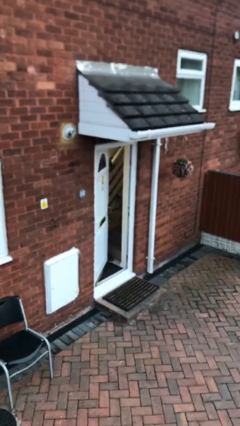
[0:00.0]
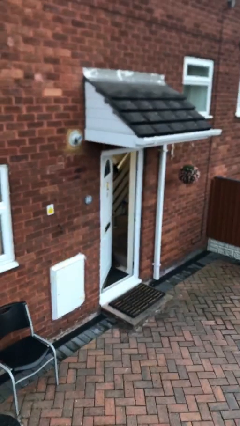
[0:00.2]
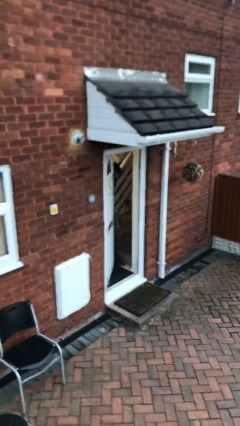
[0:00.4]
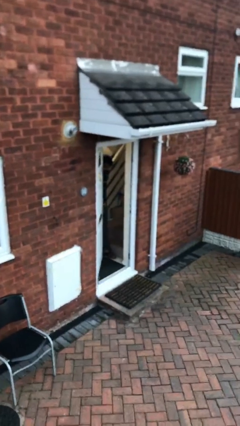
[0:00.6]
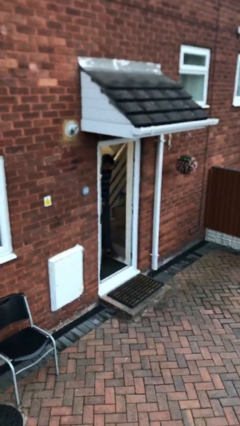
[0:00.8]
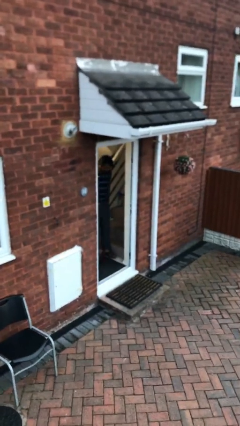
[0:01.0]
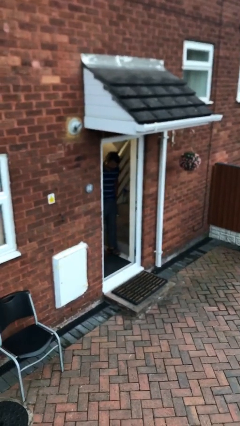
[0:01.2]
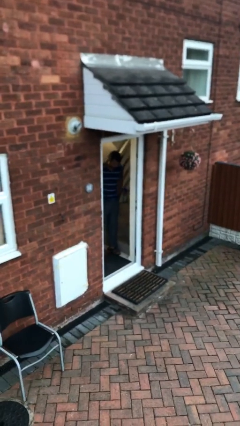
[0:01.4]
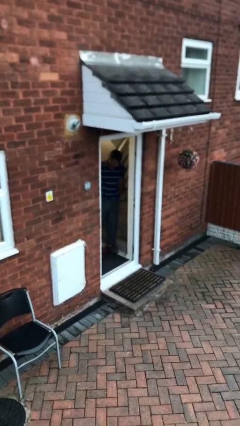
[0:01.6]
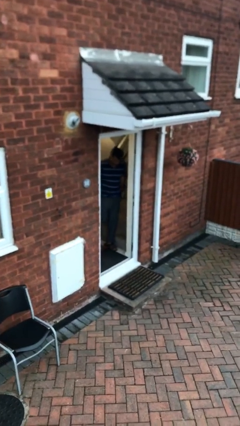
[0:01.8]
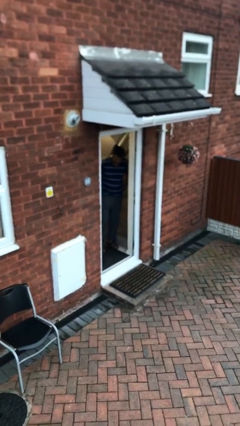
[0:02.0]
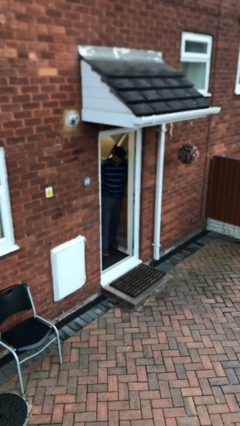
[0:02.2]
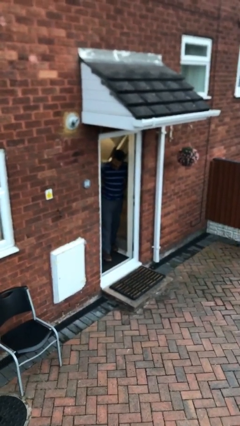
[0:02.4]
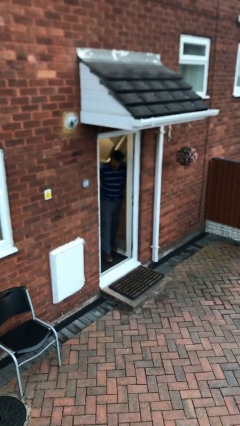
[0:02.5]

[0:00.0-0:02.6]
person opens facility door

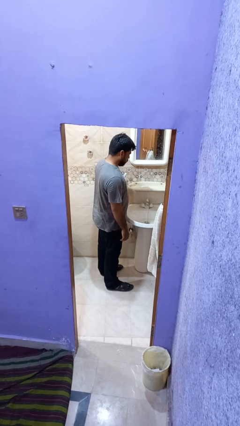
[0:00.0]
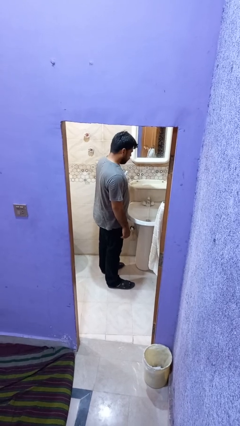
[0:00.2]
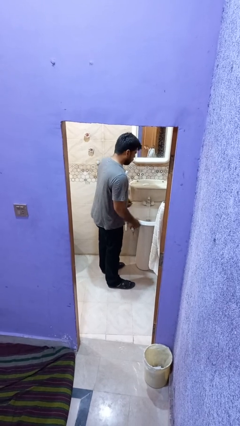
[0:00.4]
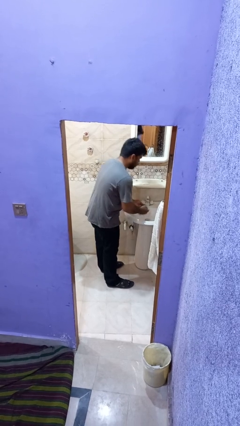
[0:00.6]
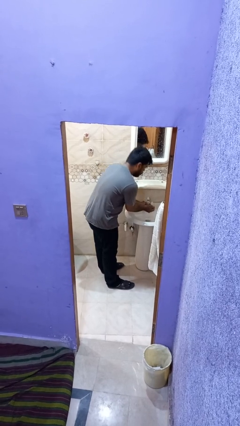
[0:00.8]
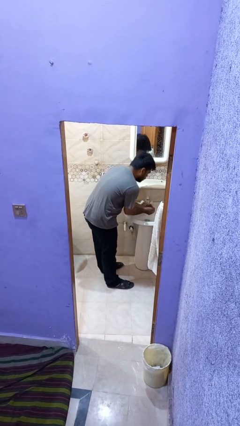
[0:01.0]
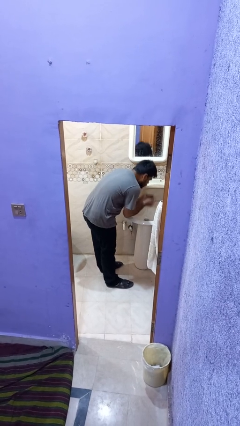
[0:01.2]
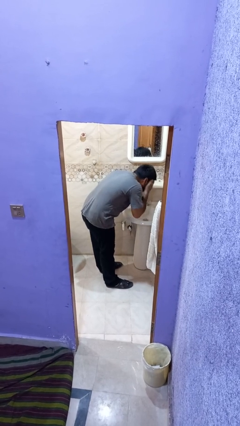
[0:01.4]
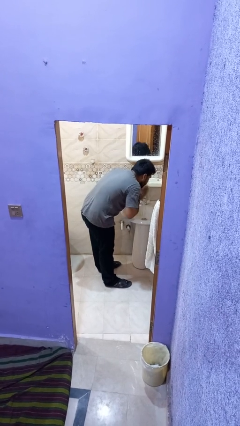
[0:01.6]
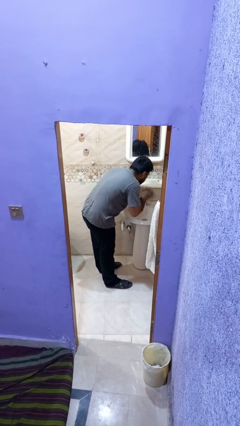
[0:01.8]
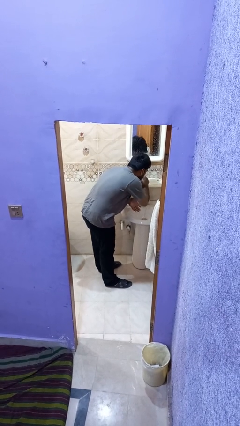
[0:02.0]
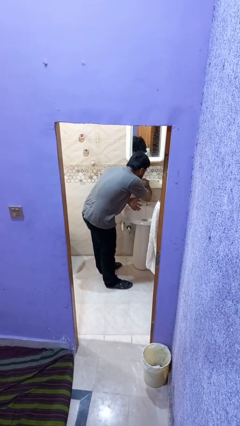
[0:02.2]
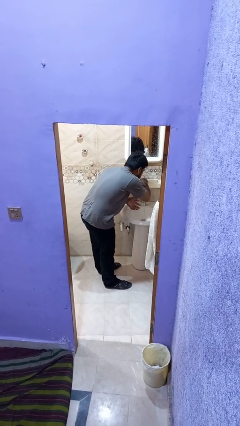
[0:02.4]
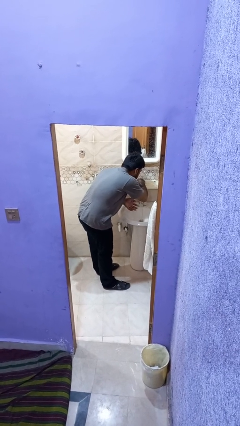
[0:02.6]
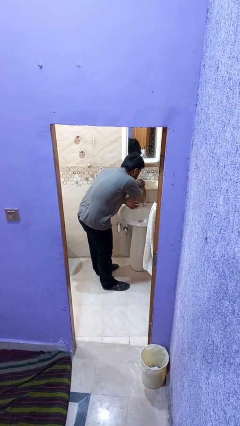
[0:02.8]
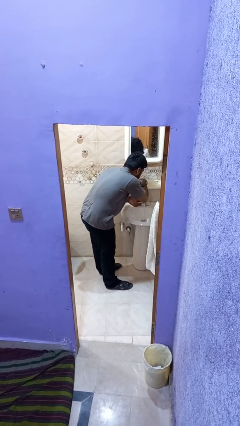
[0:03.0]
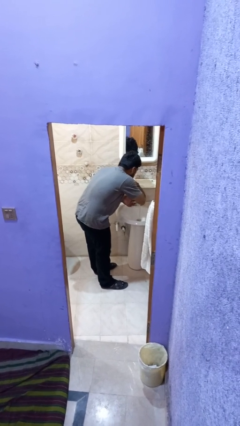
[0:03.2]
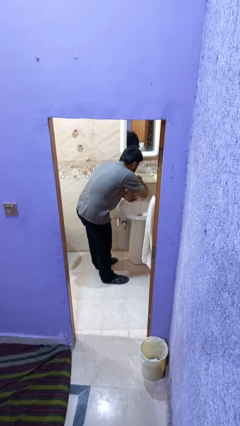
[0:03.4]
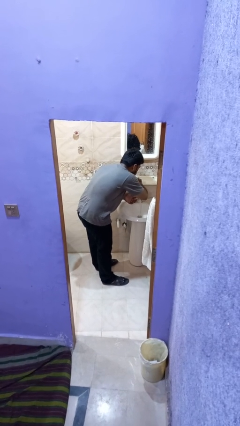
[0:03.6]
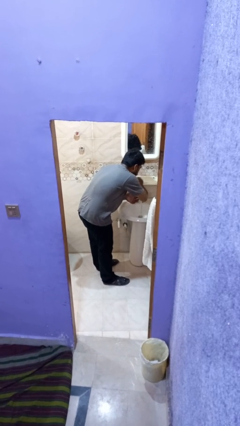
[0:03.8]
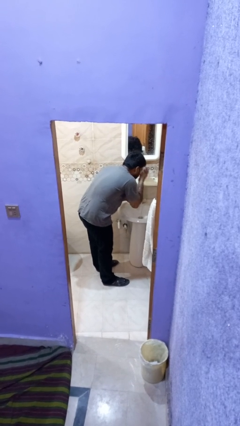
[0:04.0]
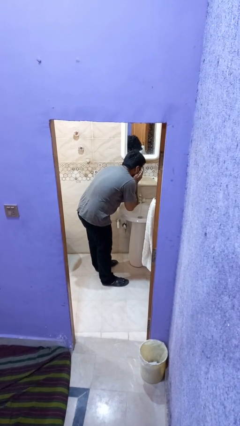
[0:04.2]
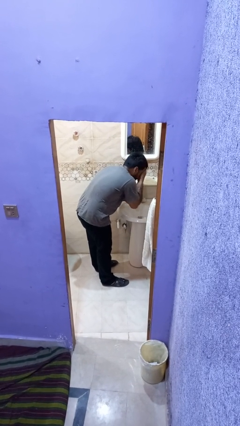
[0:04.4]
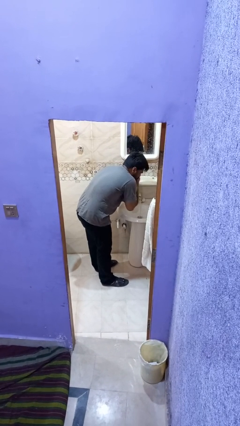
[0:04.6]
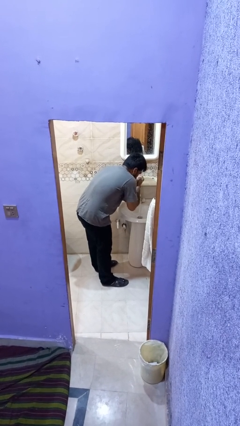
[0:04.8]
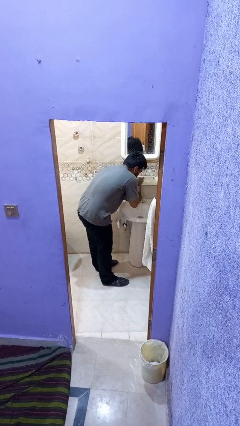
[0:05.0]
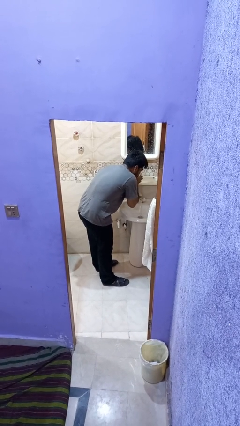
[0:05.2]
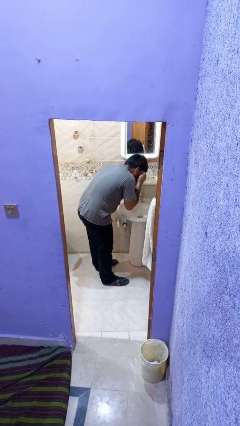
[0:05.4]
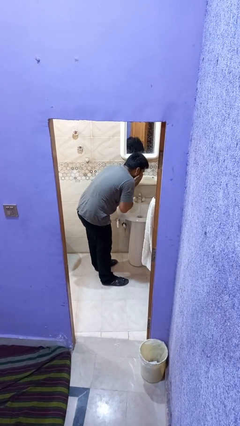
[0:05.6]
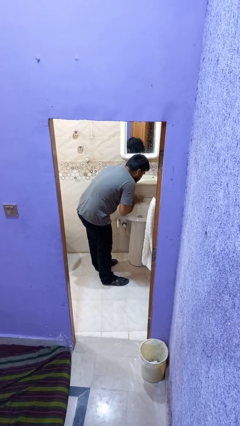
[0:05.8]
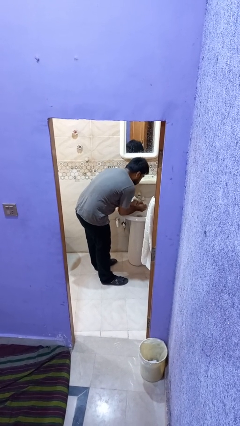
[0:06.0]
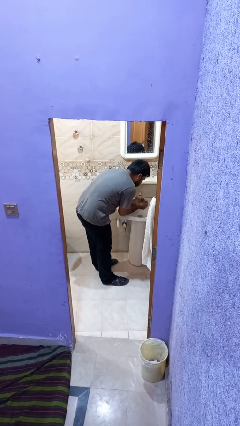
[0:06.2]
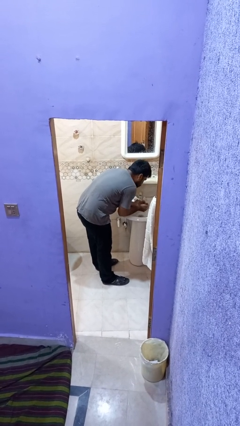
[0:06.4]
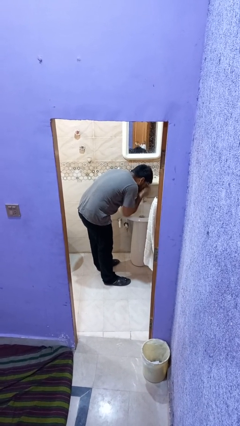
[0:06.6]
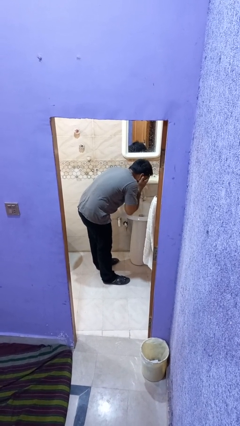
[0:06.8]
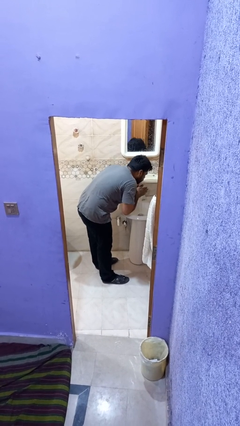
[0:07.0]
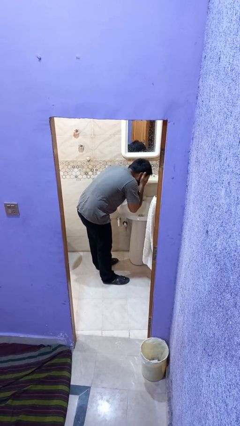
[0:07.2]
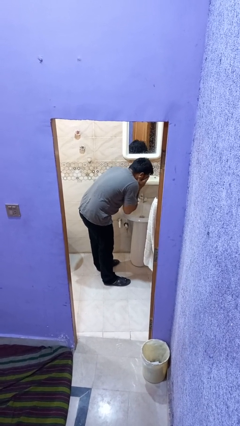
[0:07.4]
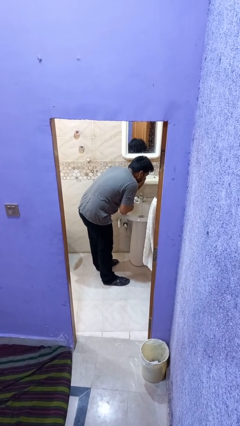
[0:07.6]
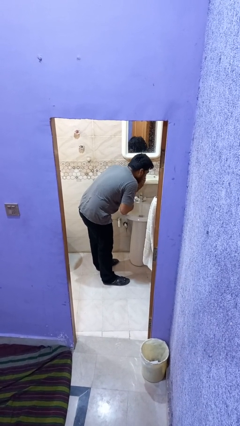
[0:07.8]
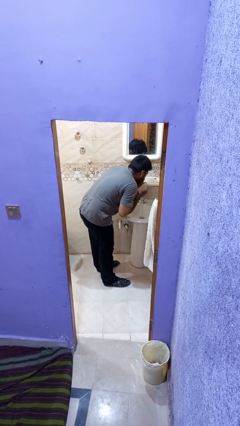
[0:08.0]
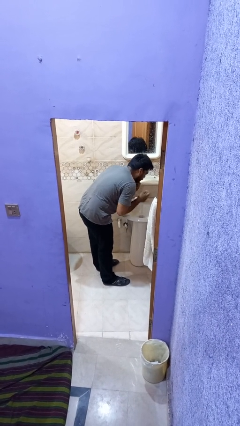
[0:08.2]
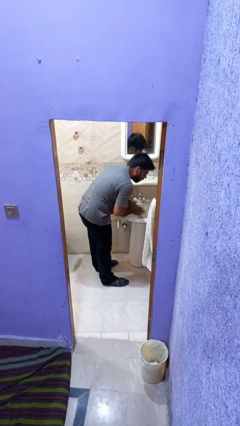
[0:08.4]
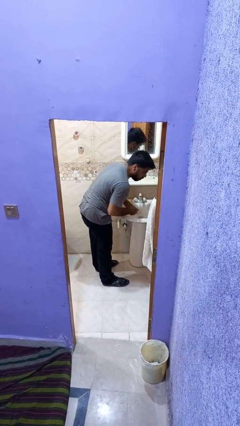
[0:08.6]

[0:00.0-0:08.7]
person washes face

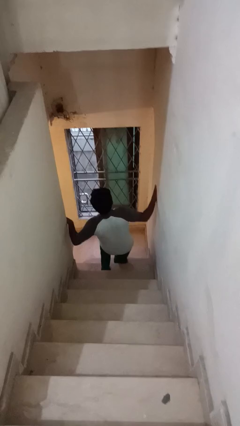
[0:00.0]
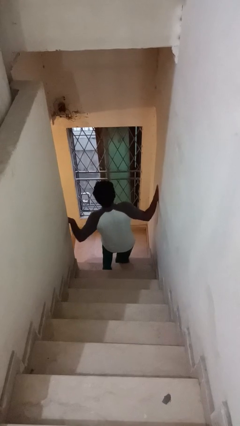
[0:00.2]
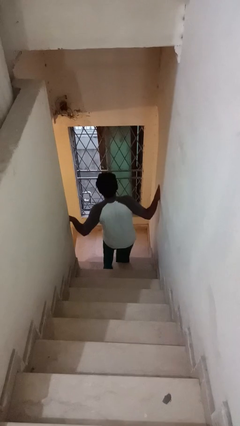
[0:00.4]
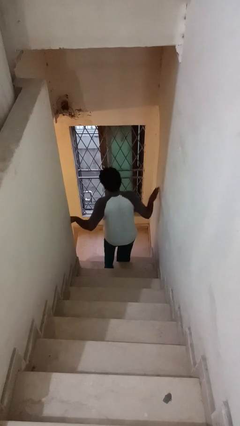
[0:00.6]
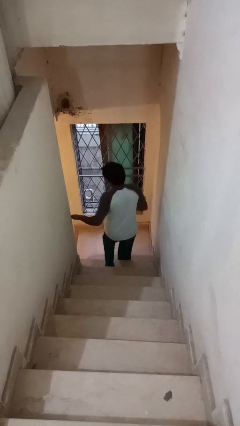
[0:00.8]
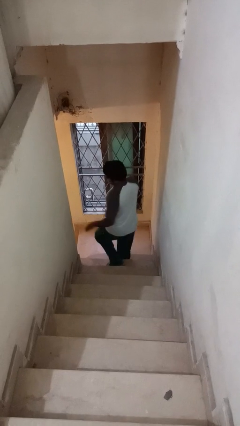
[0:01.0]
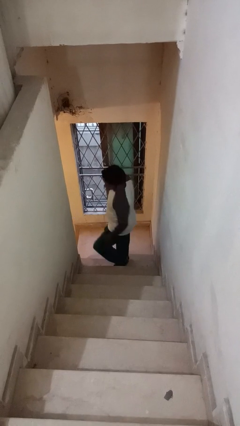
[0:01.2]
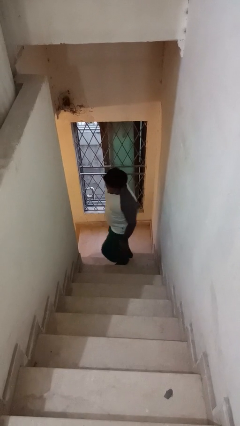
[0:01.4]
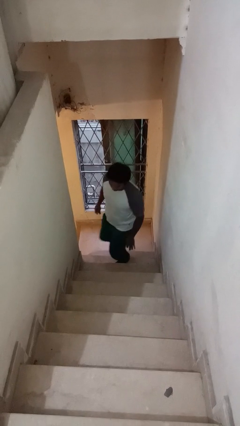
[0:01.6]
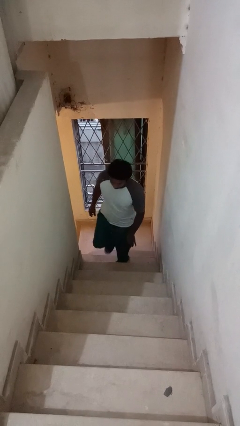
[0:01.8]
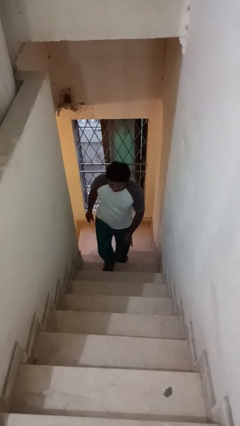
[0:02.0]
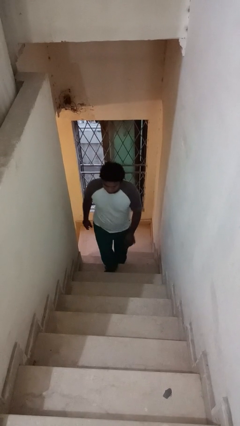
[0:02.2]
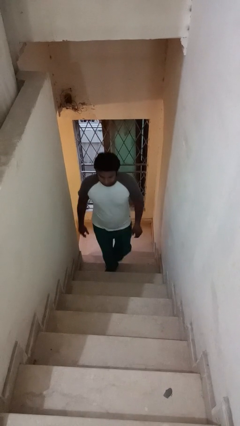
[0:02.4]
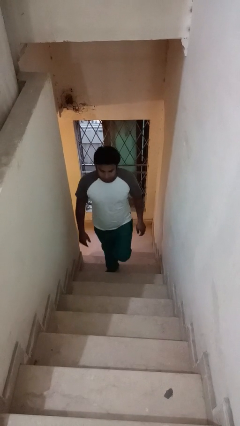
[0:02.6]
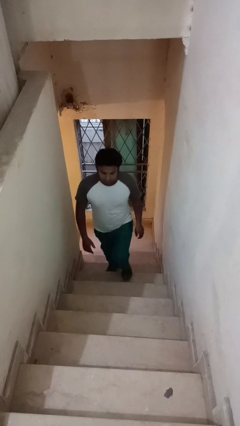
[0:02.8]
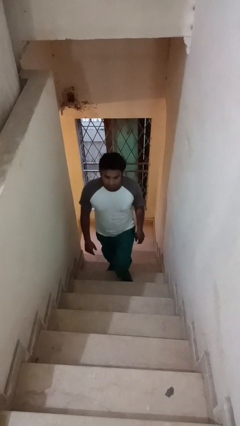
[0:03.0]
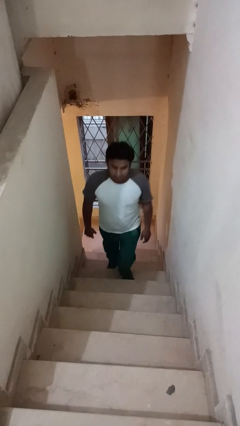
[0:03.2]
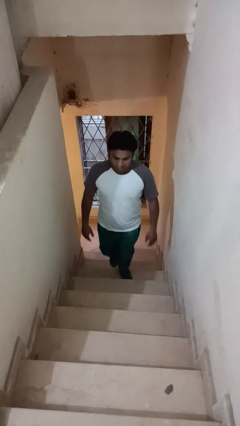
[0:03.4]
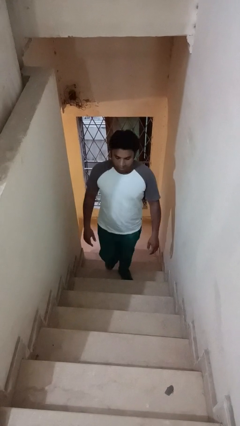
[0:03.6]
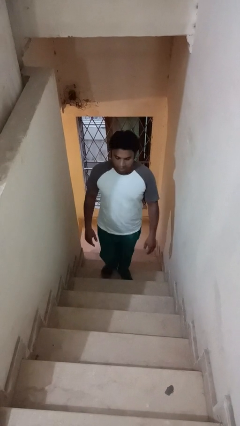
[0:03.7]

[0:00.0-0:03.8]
person climbs up stairs

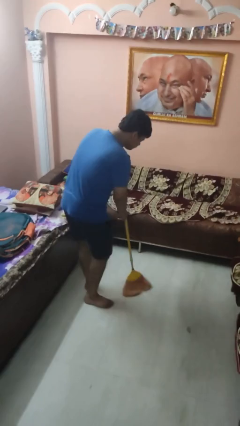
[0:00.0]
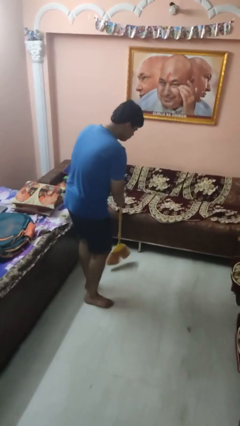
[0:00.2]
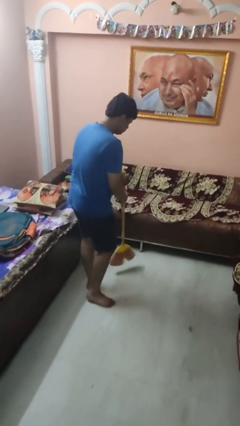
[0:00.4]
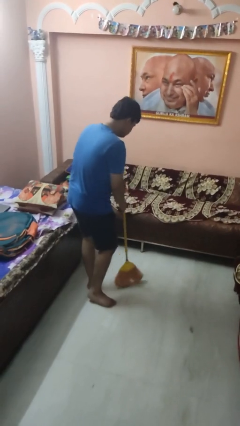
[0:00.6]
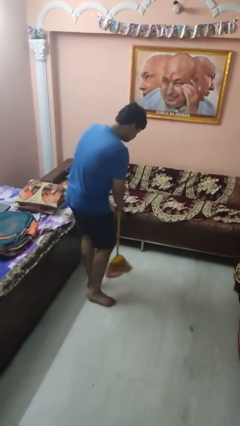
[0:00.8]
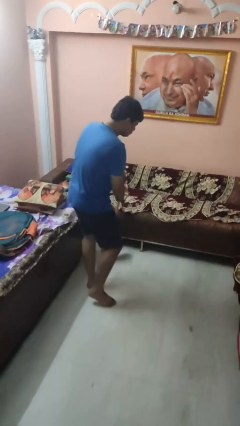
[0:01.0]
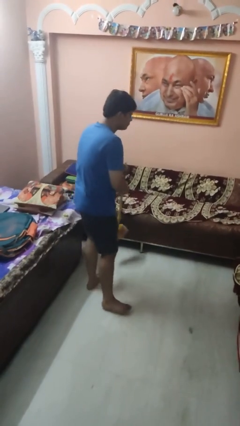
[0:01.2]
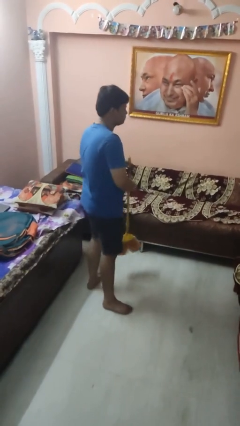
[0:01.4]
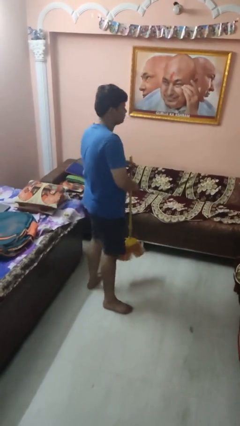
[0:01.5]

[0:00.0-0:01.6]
person sweeps floor

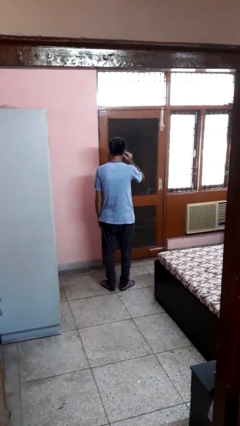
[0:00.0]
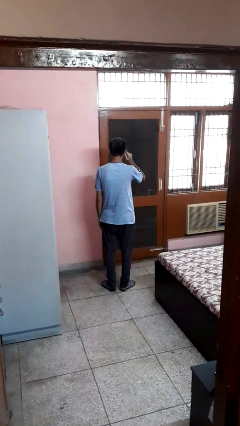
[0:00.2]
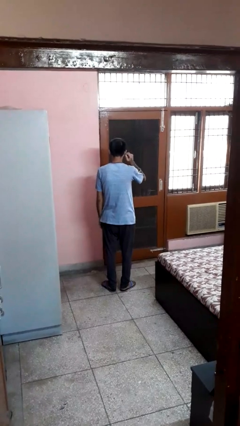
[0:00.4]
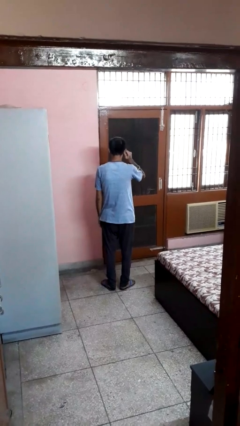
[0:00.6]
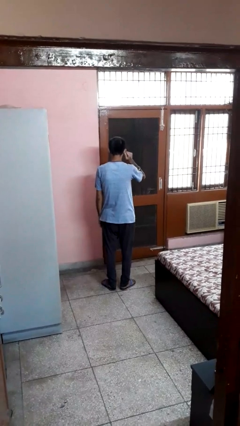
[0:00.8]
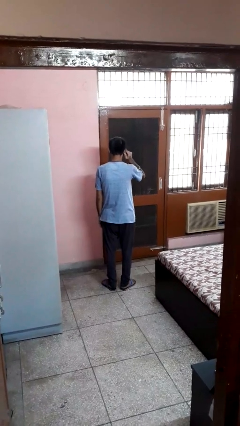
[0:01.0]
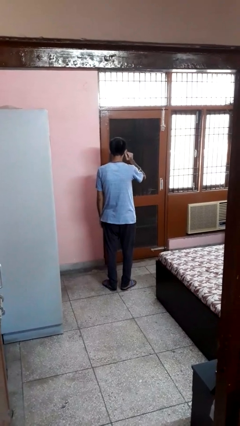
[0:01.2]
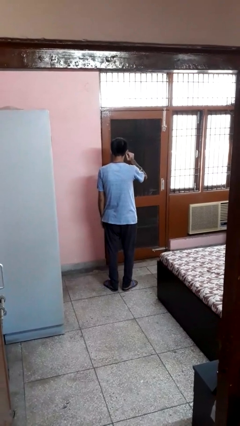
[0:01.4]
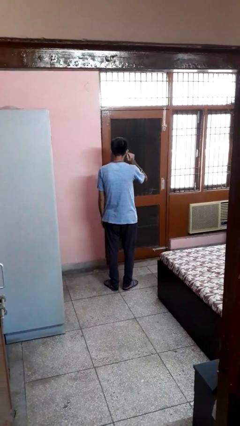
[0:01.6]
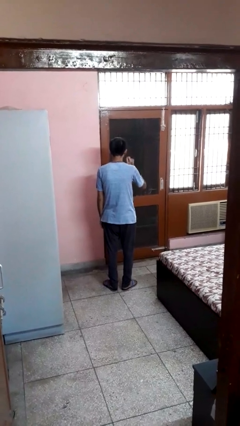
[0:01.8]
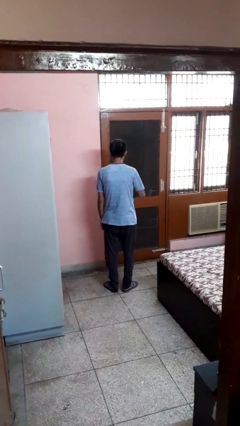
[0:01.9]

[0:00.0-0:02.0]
person touches earlobe
